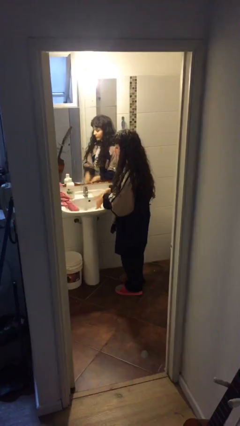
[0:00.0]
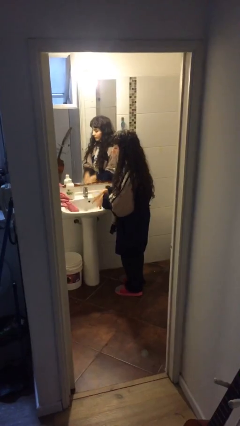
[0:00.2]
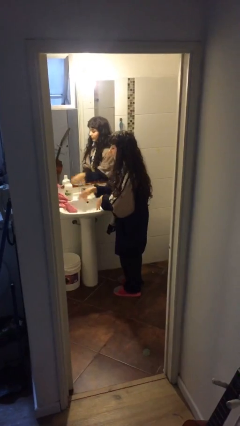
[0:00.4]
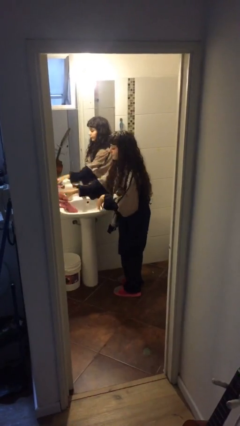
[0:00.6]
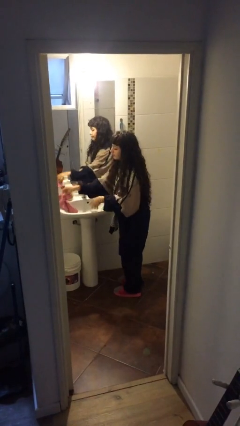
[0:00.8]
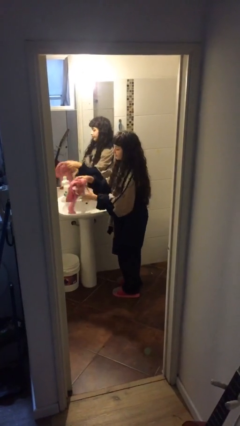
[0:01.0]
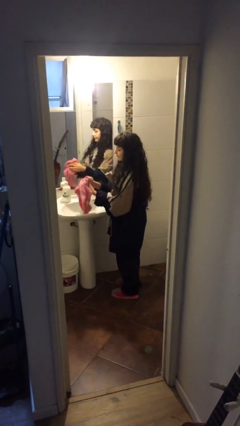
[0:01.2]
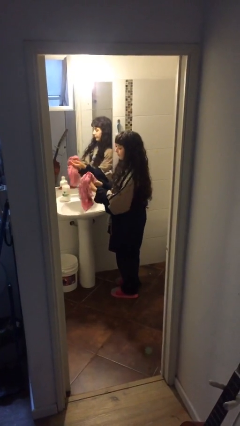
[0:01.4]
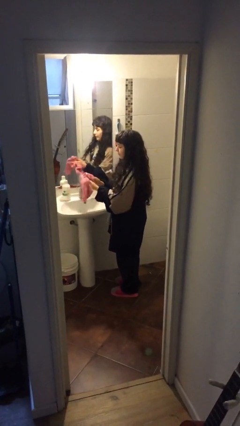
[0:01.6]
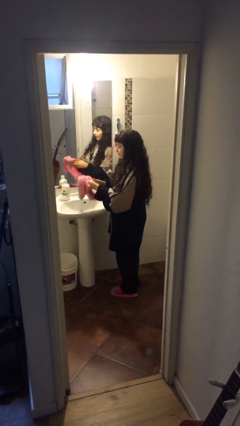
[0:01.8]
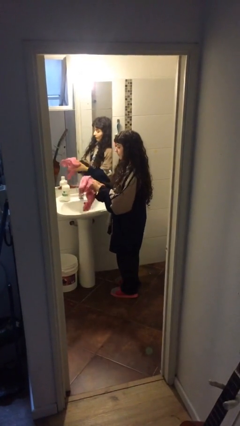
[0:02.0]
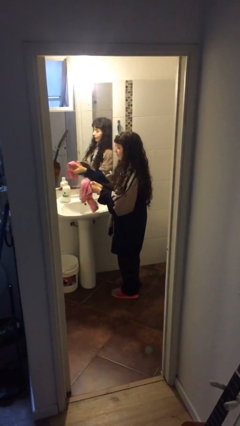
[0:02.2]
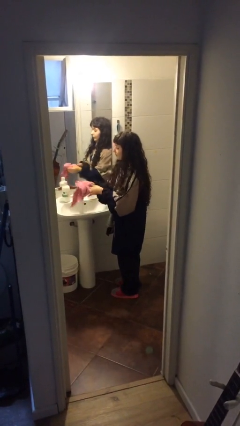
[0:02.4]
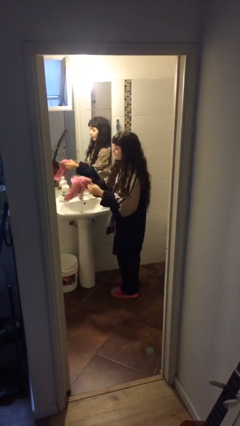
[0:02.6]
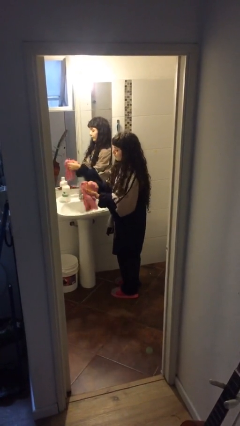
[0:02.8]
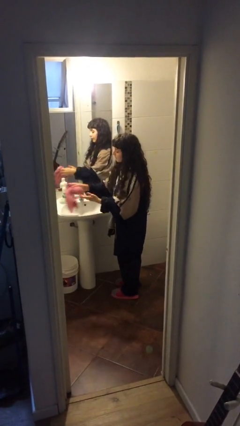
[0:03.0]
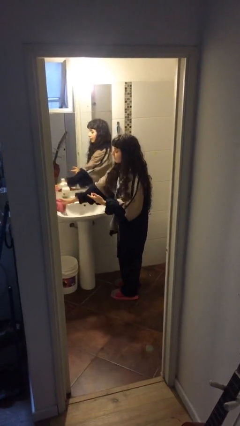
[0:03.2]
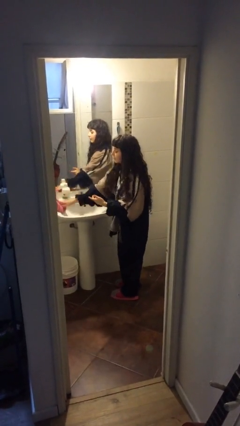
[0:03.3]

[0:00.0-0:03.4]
person dries hands with towel

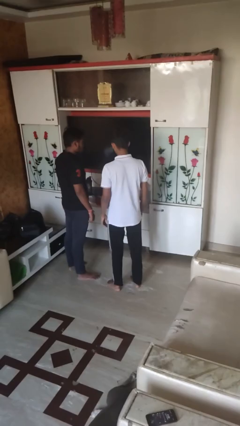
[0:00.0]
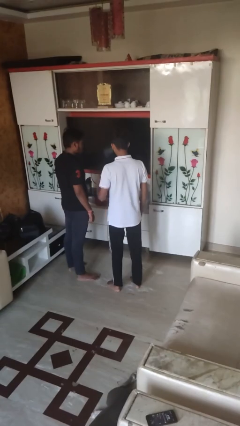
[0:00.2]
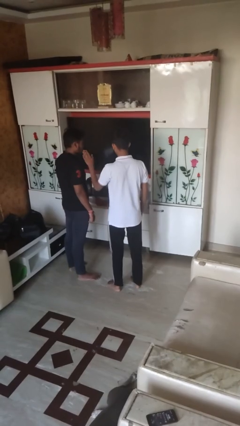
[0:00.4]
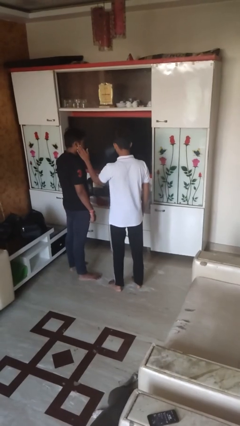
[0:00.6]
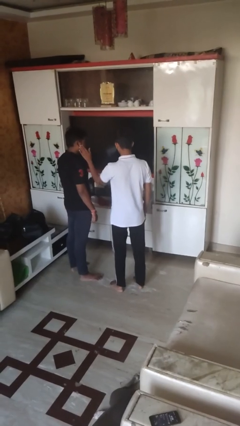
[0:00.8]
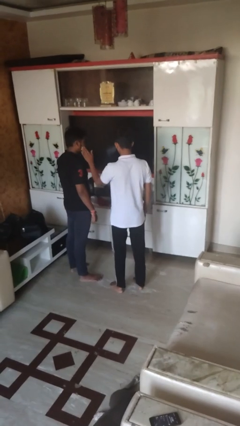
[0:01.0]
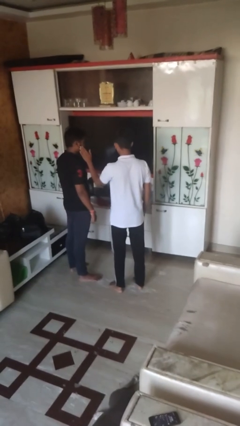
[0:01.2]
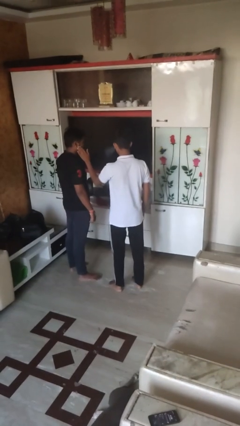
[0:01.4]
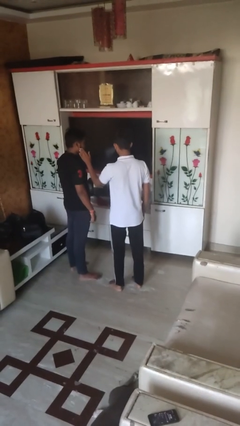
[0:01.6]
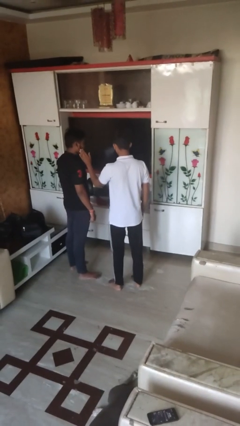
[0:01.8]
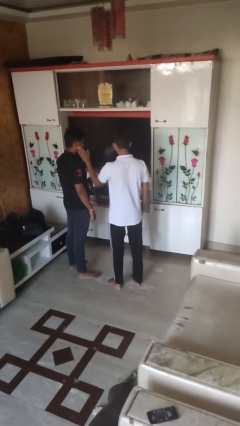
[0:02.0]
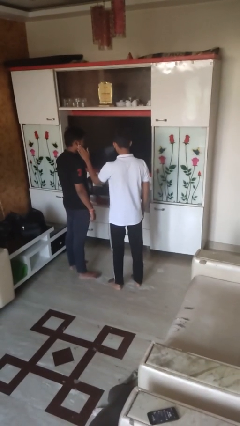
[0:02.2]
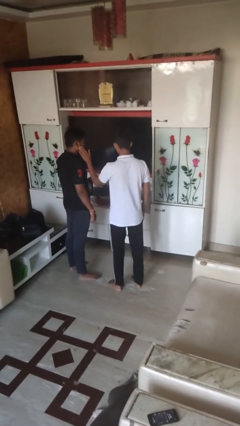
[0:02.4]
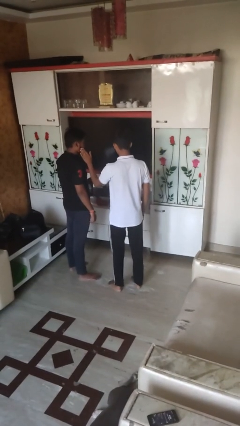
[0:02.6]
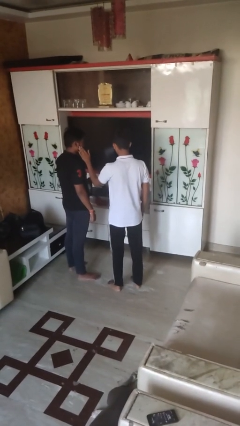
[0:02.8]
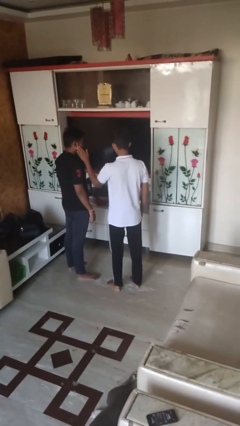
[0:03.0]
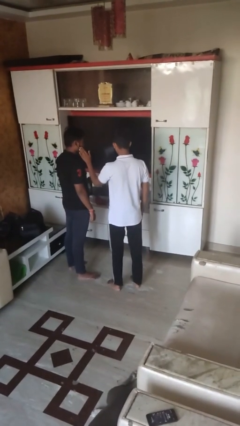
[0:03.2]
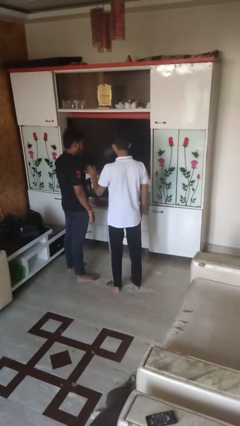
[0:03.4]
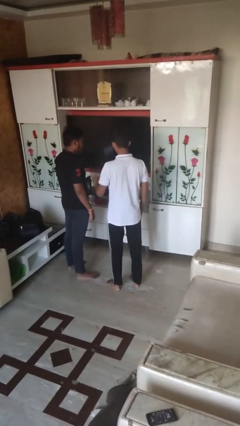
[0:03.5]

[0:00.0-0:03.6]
person touches face of person

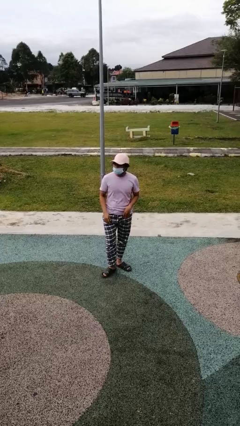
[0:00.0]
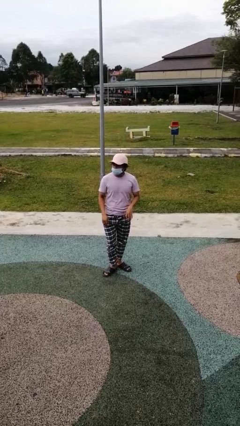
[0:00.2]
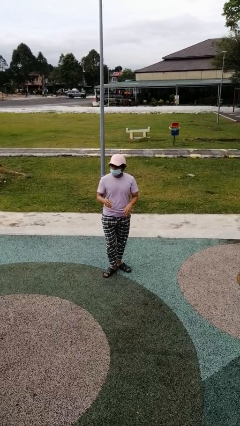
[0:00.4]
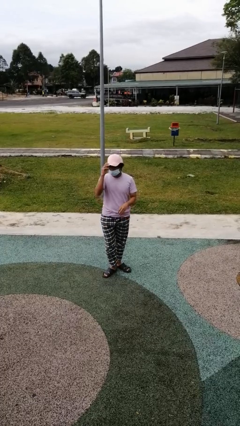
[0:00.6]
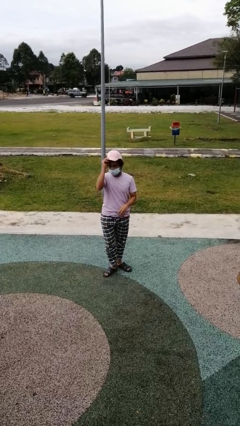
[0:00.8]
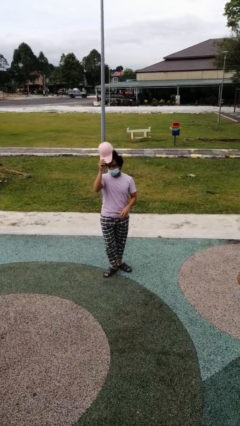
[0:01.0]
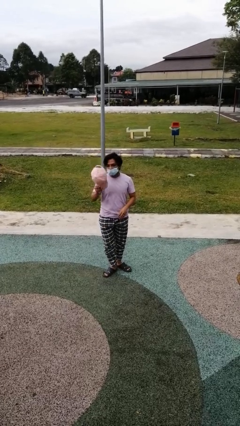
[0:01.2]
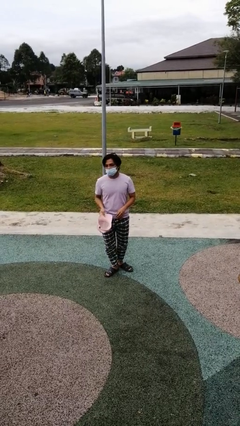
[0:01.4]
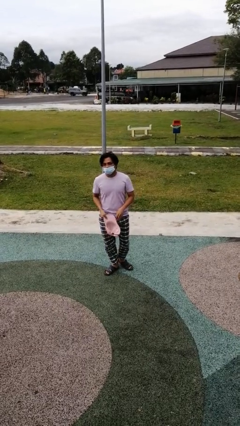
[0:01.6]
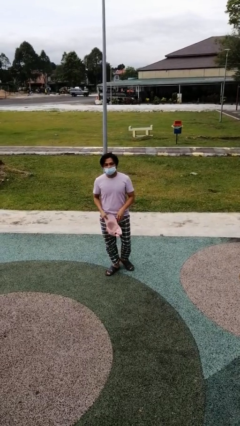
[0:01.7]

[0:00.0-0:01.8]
person takes off hat

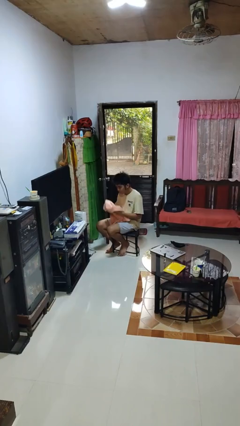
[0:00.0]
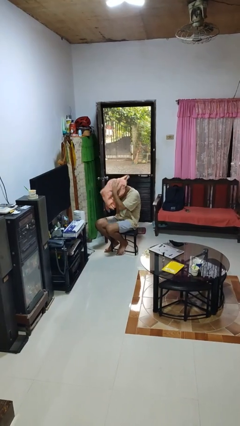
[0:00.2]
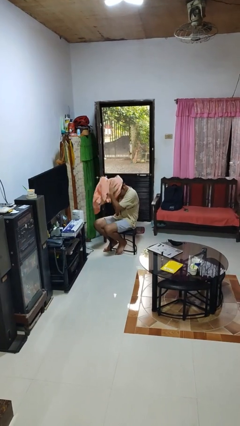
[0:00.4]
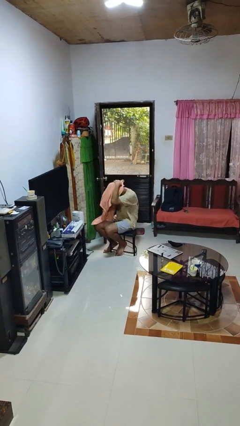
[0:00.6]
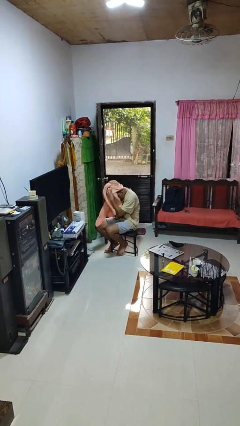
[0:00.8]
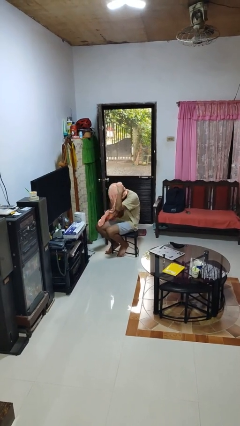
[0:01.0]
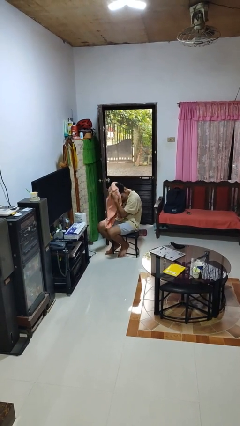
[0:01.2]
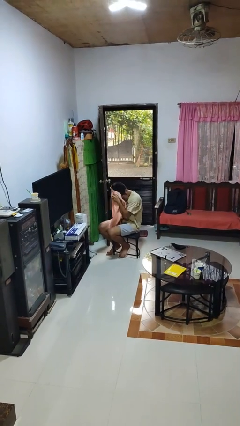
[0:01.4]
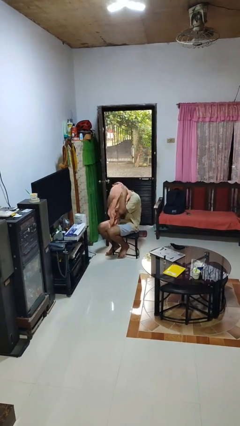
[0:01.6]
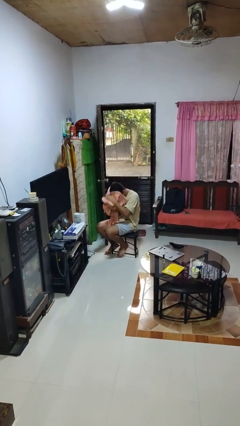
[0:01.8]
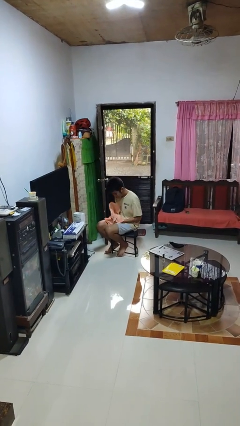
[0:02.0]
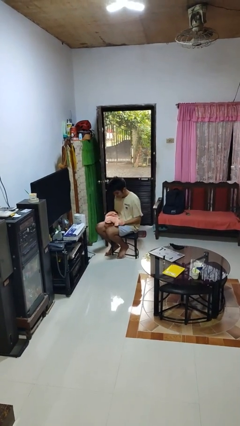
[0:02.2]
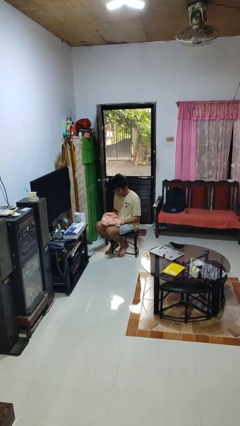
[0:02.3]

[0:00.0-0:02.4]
person dries hair with towel

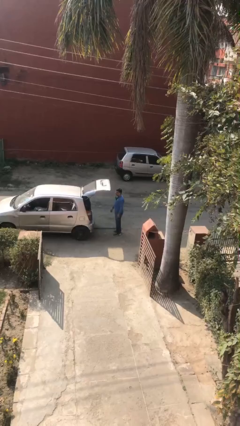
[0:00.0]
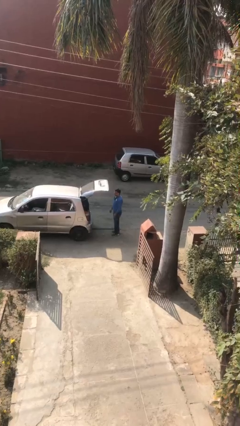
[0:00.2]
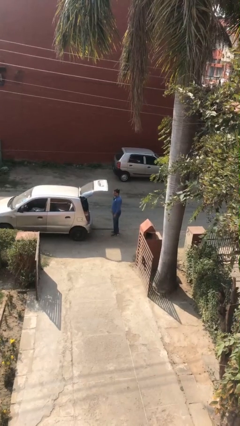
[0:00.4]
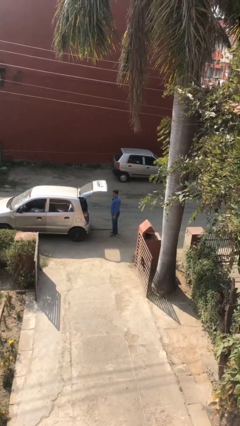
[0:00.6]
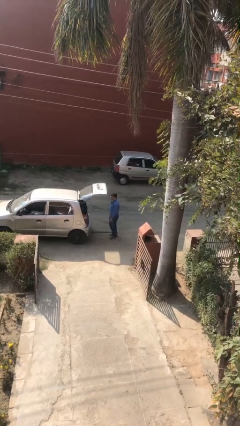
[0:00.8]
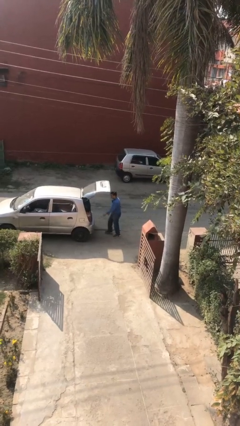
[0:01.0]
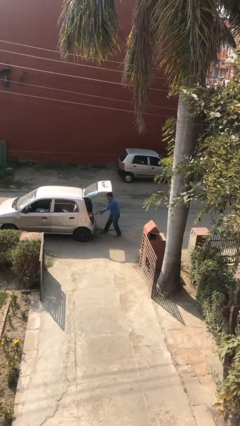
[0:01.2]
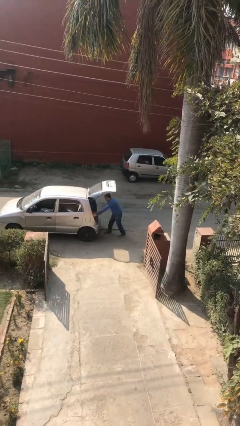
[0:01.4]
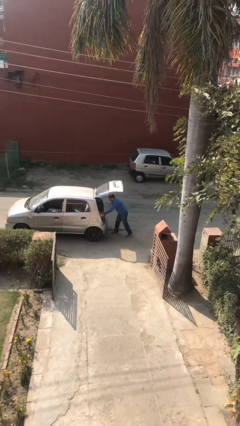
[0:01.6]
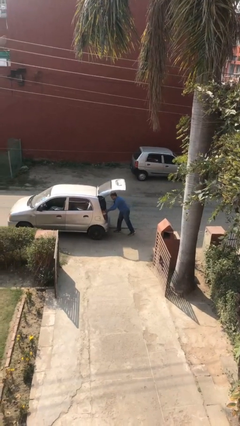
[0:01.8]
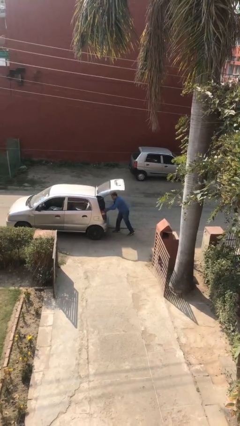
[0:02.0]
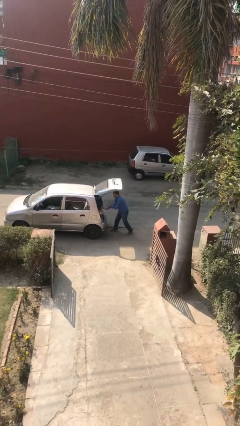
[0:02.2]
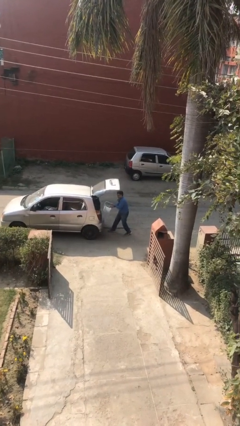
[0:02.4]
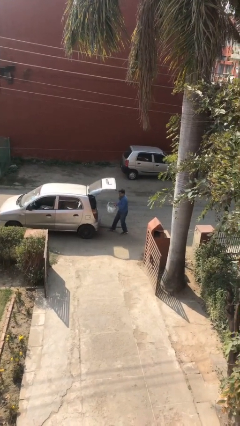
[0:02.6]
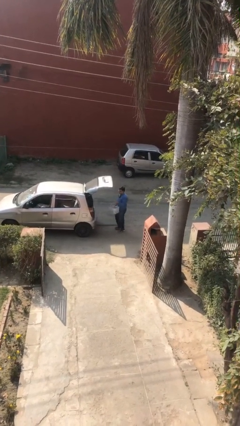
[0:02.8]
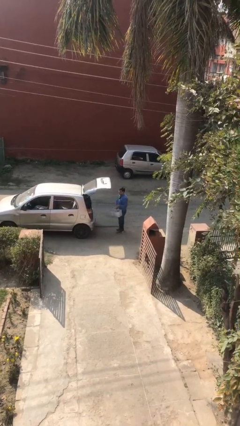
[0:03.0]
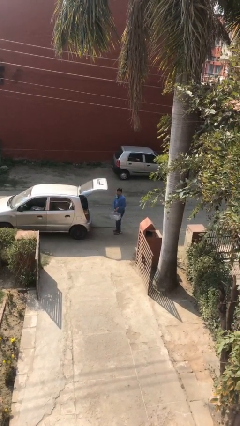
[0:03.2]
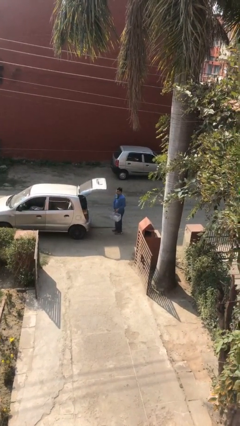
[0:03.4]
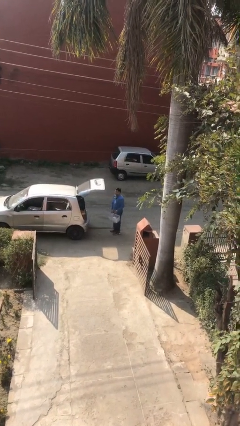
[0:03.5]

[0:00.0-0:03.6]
person unloads car

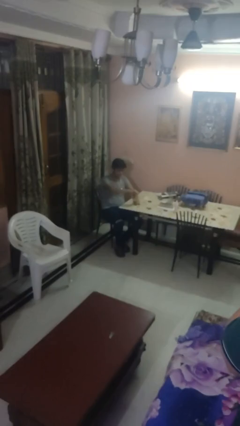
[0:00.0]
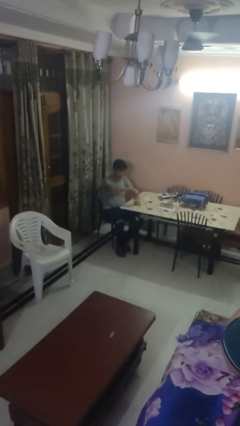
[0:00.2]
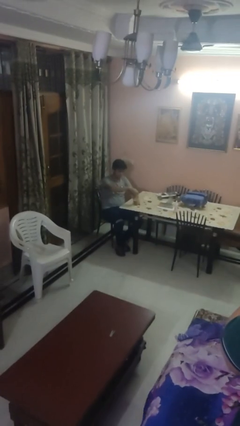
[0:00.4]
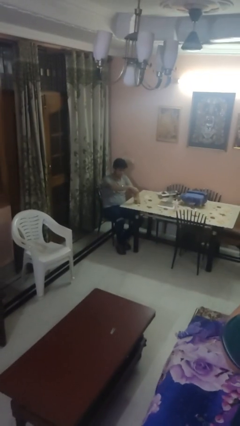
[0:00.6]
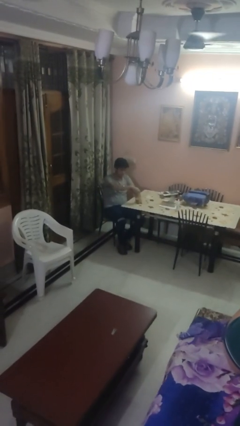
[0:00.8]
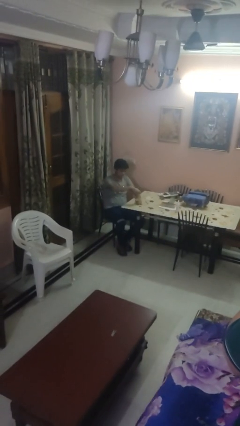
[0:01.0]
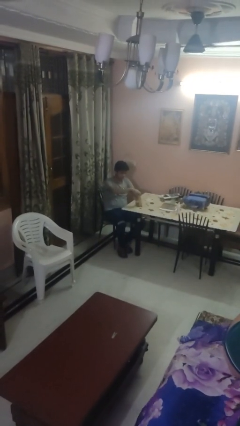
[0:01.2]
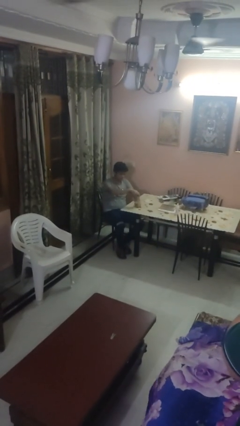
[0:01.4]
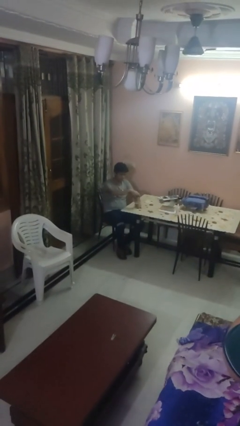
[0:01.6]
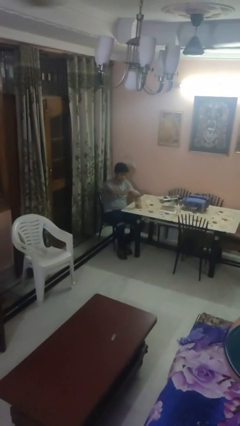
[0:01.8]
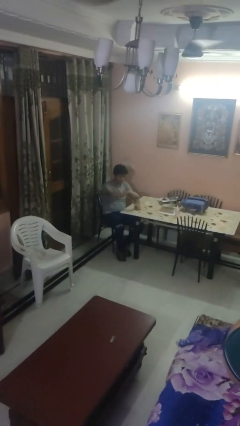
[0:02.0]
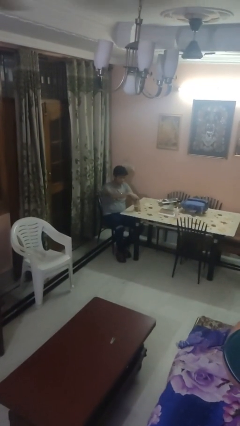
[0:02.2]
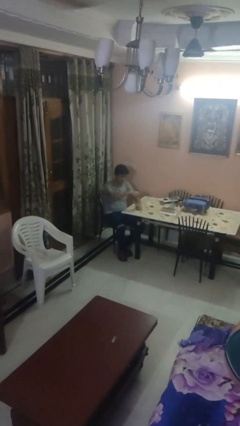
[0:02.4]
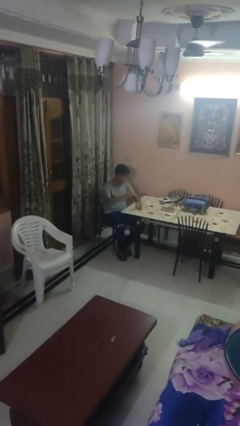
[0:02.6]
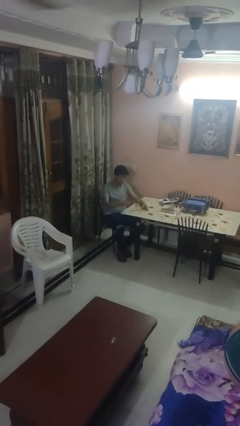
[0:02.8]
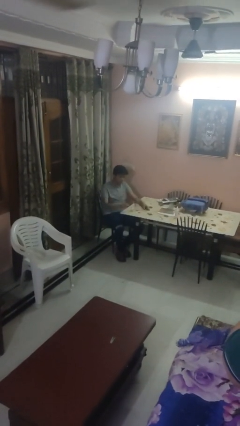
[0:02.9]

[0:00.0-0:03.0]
person unscrews lid from bottle
